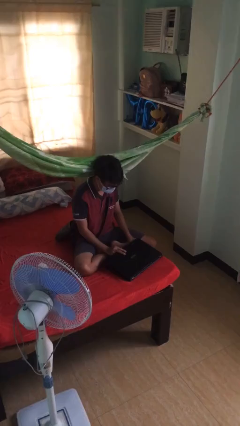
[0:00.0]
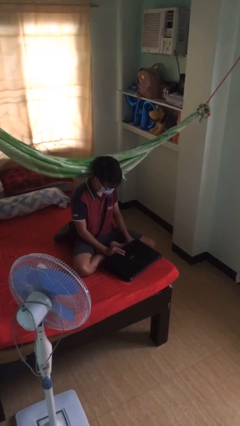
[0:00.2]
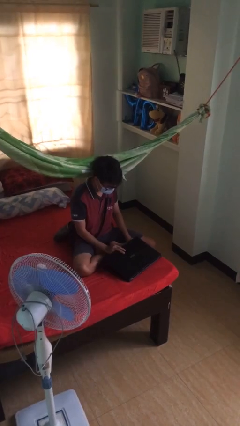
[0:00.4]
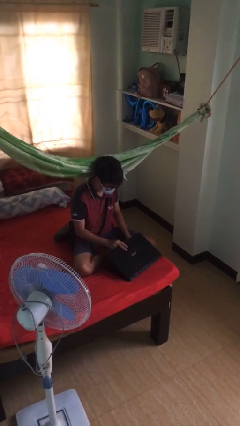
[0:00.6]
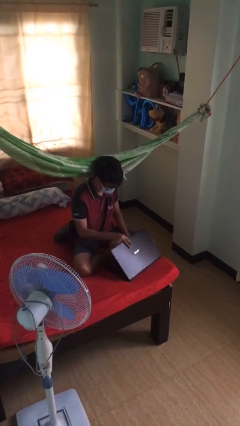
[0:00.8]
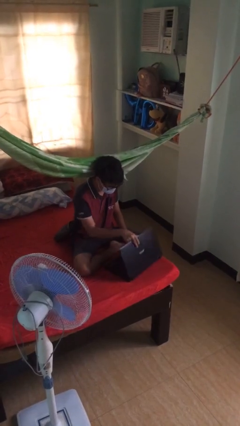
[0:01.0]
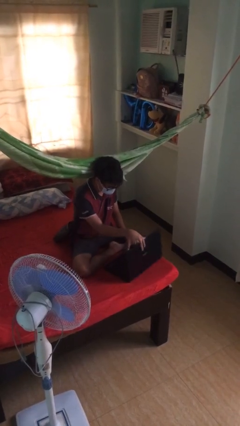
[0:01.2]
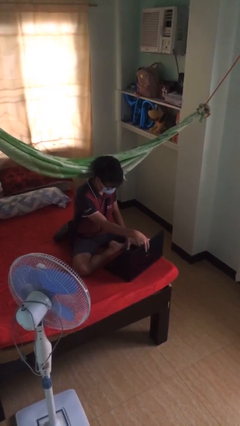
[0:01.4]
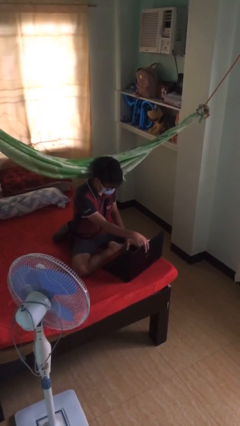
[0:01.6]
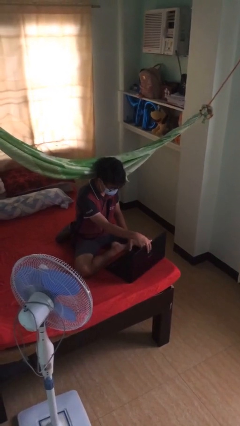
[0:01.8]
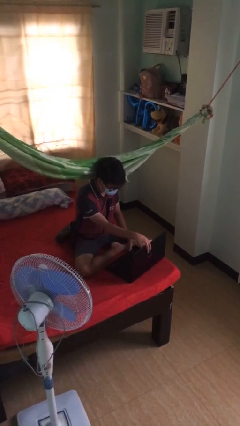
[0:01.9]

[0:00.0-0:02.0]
person interacts with laptop

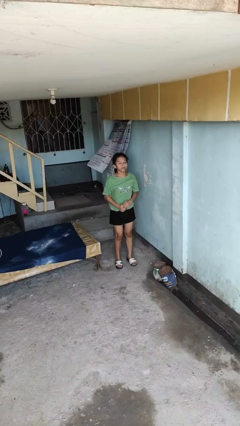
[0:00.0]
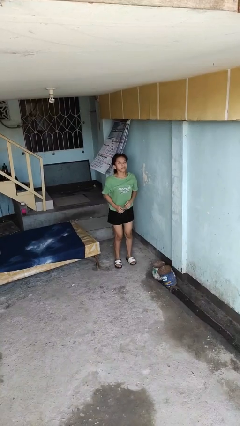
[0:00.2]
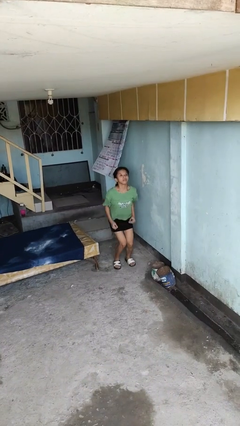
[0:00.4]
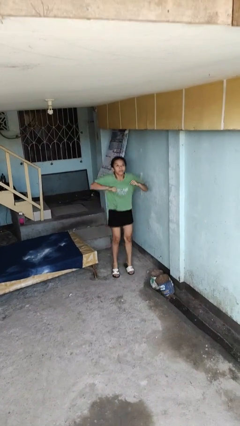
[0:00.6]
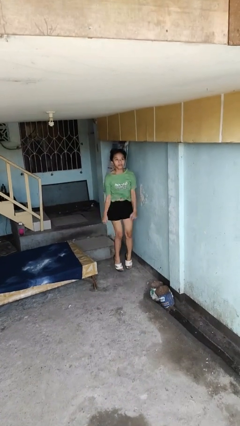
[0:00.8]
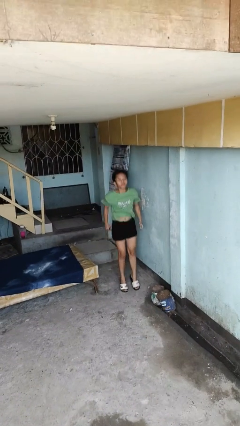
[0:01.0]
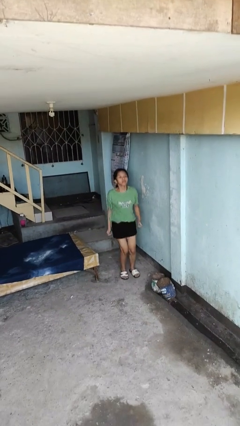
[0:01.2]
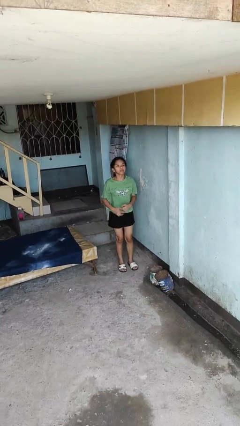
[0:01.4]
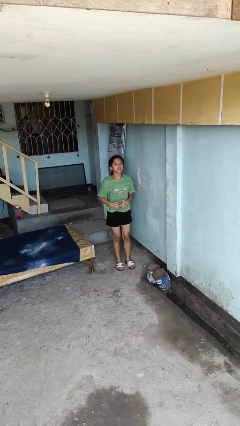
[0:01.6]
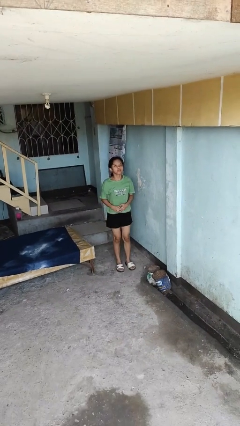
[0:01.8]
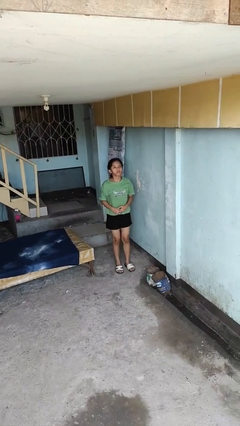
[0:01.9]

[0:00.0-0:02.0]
person jumps

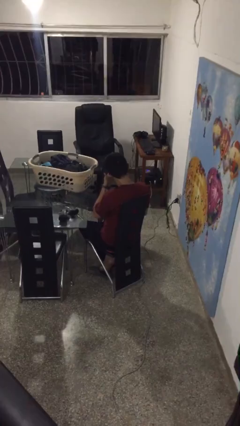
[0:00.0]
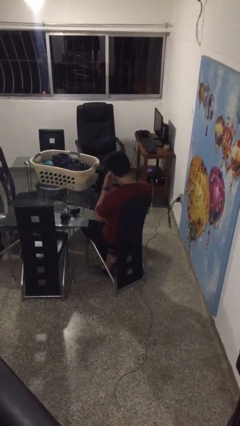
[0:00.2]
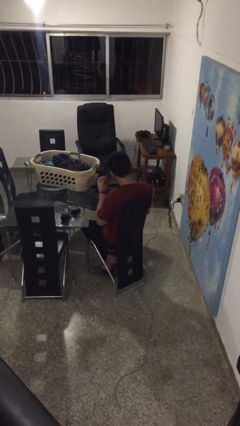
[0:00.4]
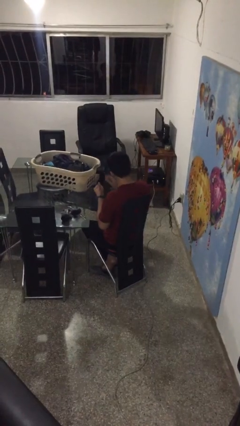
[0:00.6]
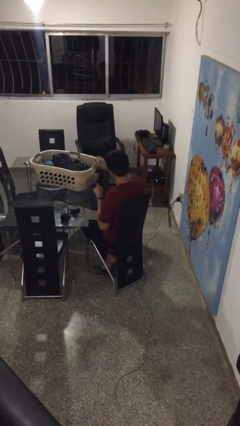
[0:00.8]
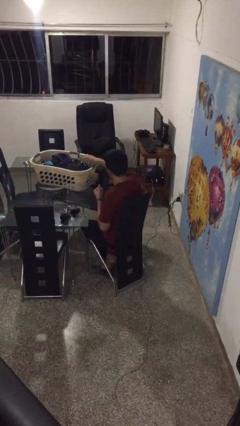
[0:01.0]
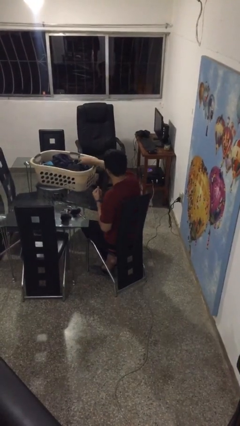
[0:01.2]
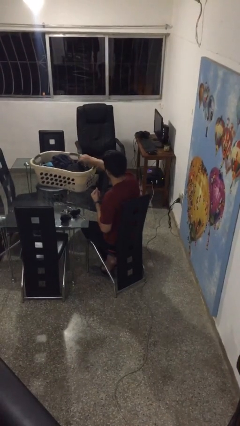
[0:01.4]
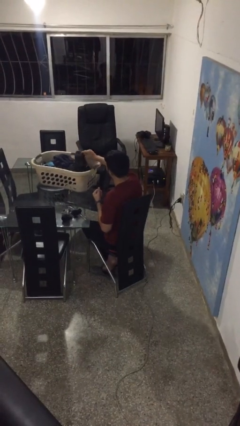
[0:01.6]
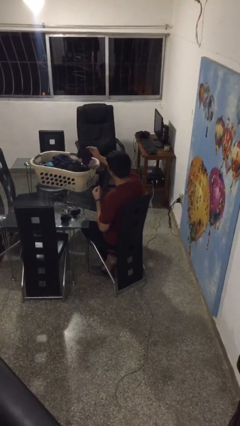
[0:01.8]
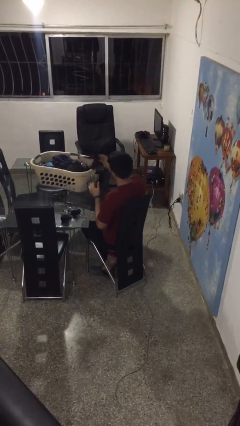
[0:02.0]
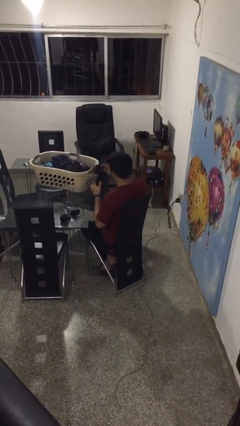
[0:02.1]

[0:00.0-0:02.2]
person folds socks

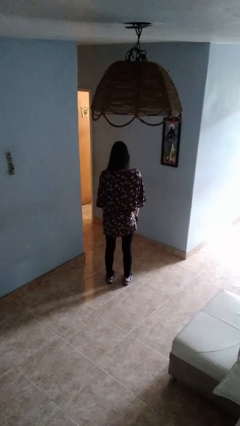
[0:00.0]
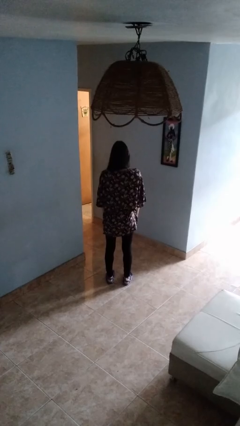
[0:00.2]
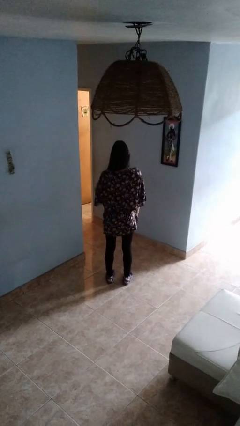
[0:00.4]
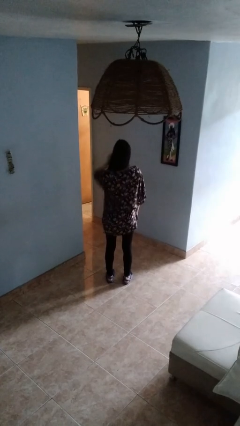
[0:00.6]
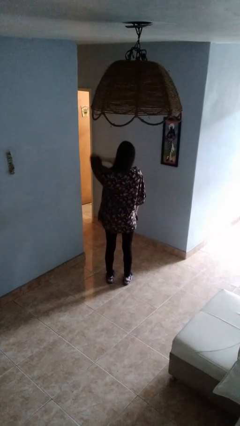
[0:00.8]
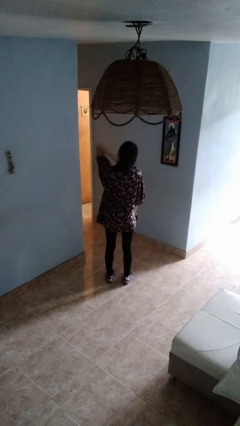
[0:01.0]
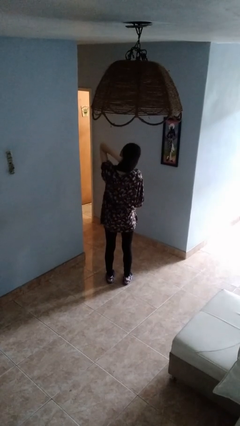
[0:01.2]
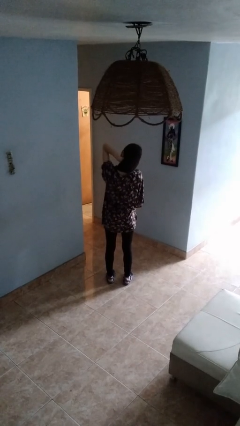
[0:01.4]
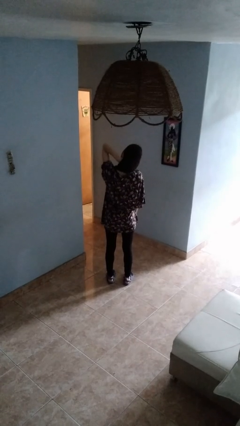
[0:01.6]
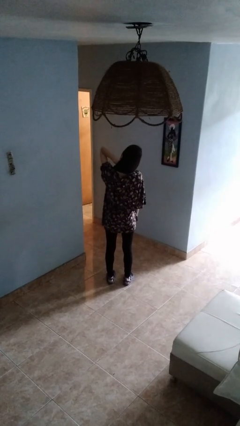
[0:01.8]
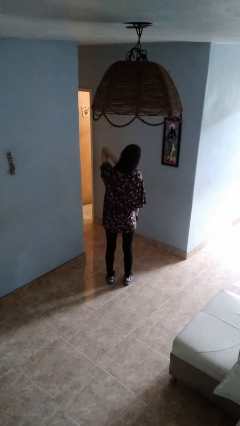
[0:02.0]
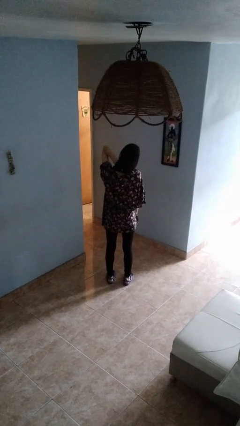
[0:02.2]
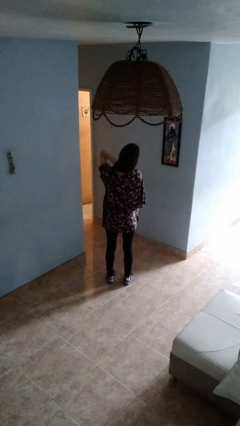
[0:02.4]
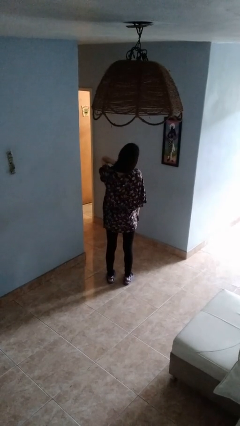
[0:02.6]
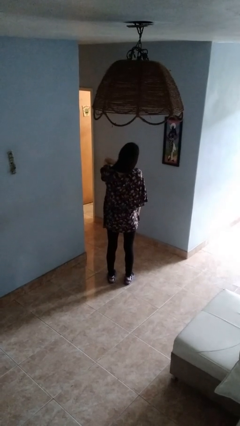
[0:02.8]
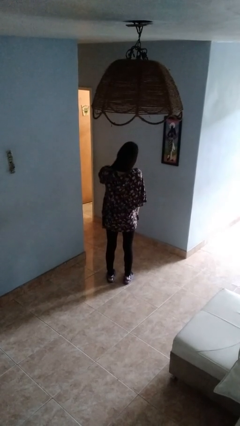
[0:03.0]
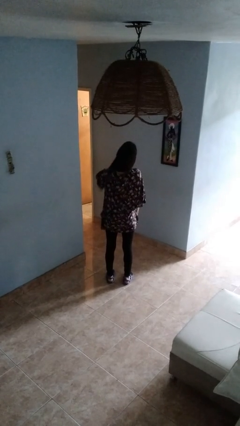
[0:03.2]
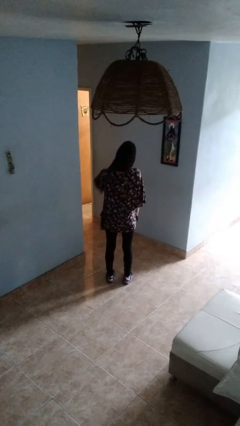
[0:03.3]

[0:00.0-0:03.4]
person rubs neck

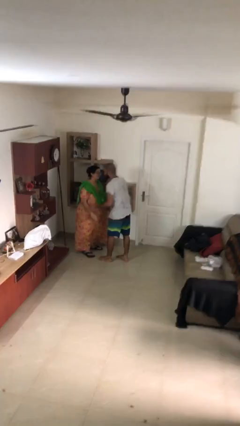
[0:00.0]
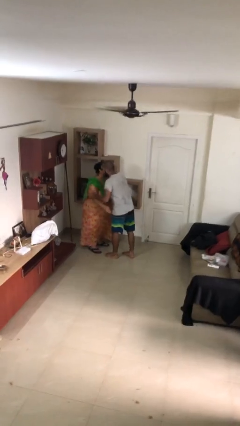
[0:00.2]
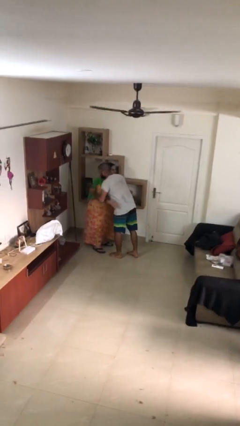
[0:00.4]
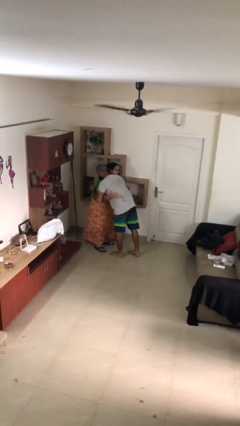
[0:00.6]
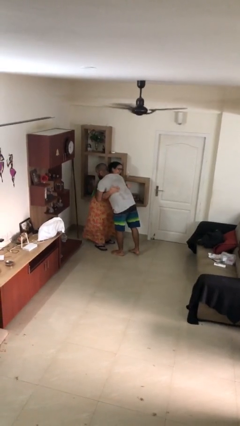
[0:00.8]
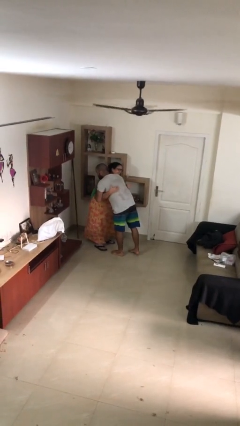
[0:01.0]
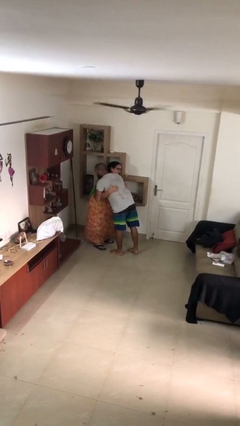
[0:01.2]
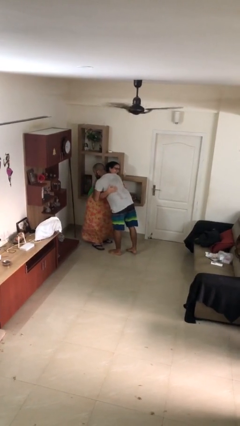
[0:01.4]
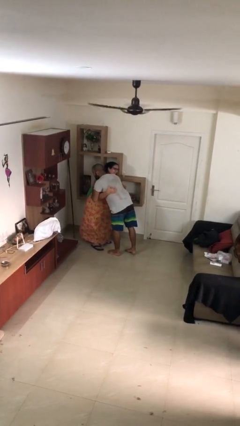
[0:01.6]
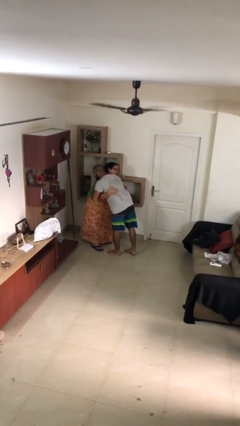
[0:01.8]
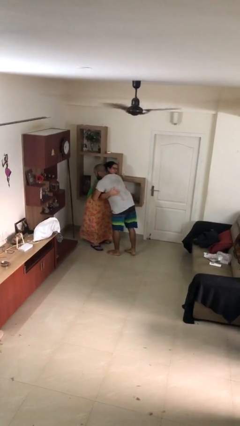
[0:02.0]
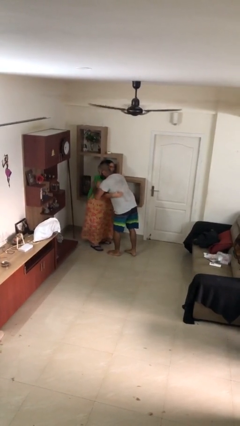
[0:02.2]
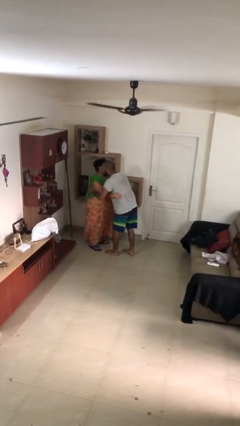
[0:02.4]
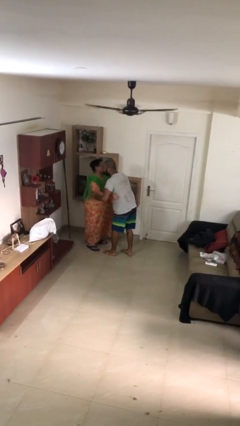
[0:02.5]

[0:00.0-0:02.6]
person embraces person

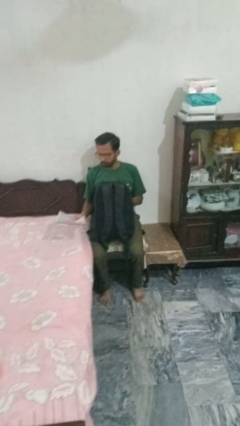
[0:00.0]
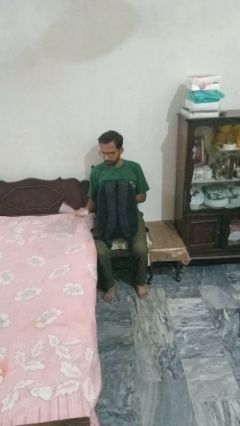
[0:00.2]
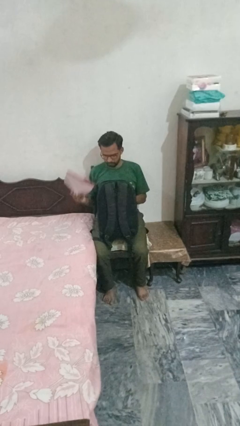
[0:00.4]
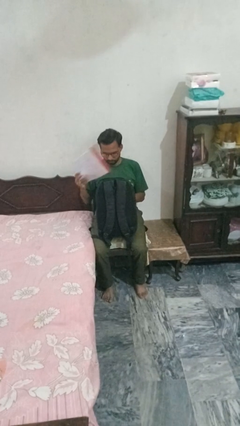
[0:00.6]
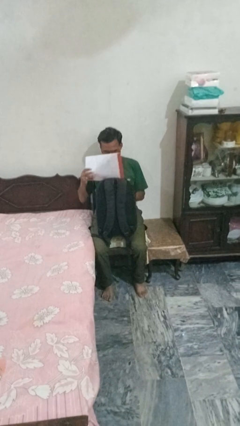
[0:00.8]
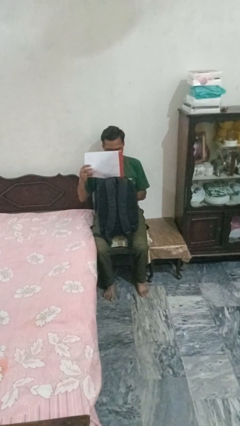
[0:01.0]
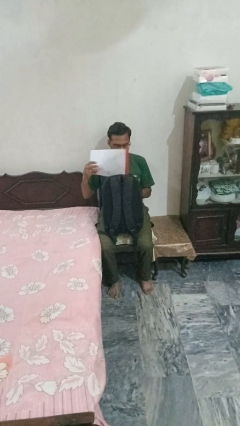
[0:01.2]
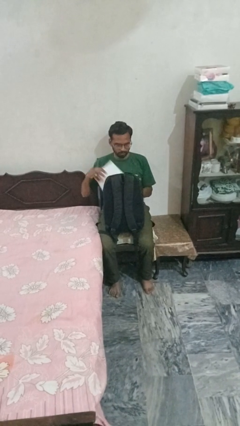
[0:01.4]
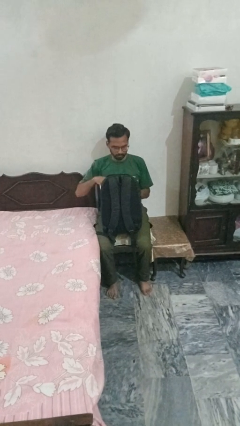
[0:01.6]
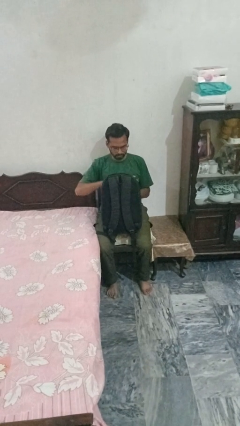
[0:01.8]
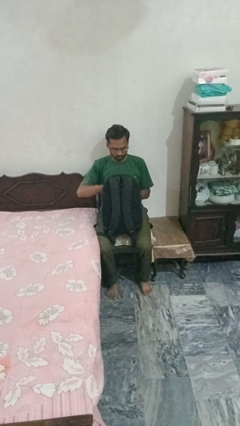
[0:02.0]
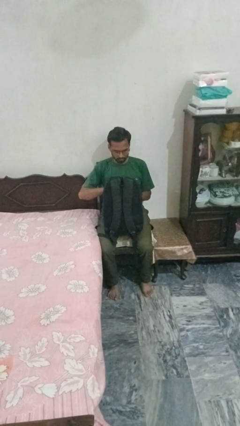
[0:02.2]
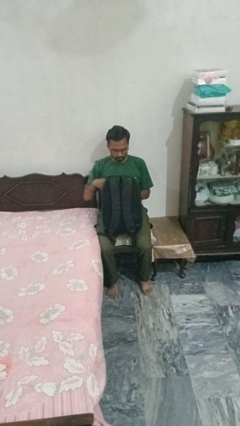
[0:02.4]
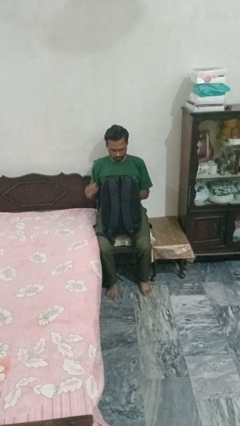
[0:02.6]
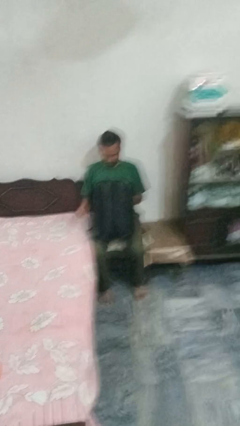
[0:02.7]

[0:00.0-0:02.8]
person puts object into backpack

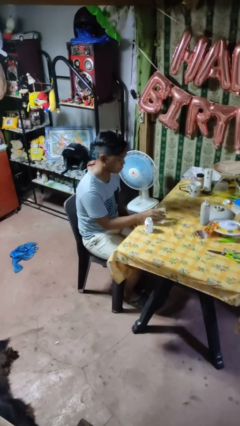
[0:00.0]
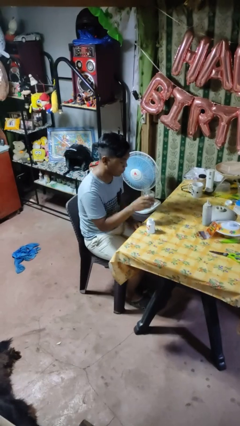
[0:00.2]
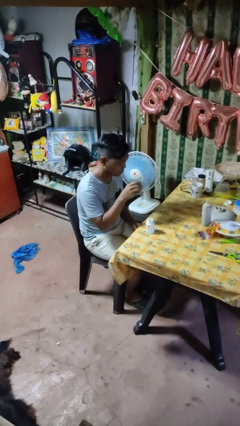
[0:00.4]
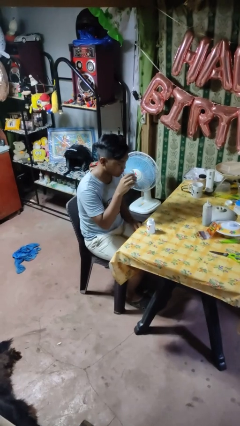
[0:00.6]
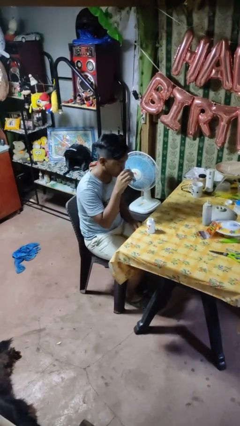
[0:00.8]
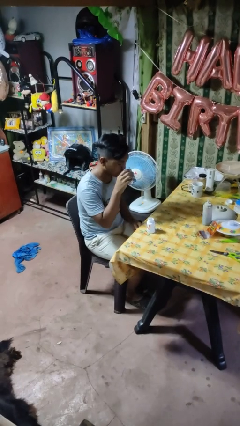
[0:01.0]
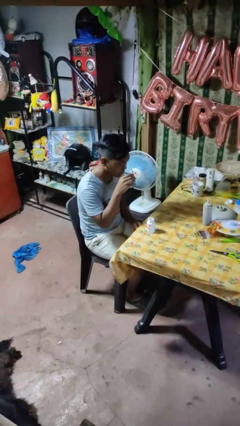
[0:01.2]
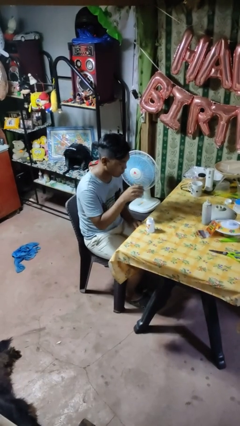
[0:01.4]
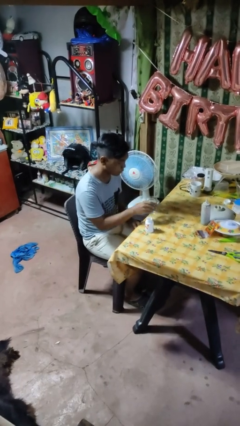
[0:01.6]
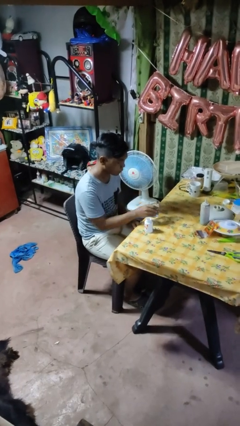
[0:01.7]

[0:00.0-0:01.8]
person drinks from cup

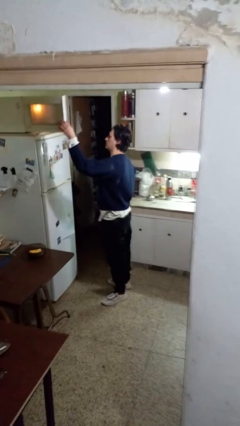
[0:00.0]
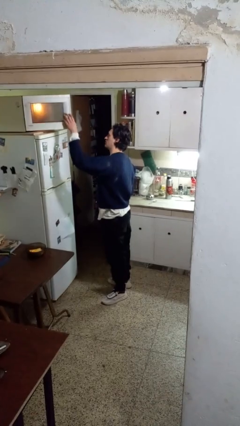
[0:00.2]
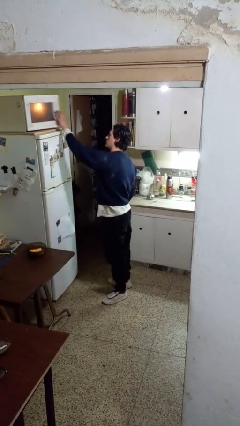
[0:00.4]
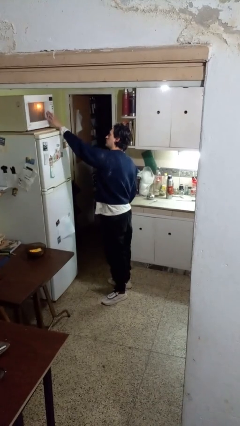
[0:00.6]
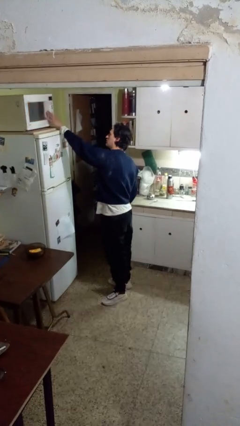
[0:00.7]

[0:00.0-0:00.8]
person closes microwave
